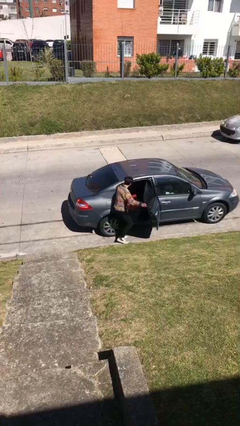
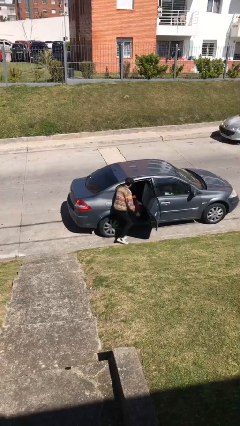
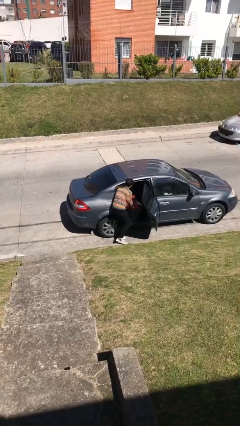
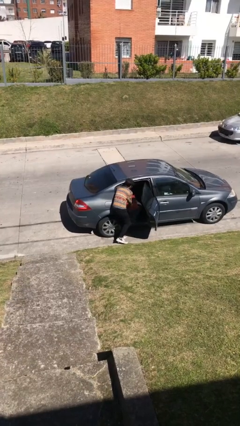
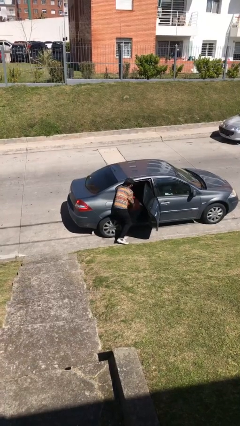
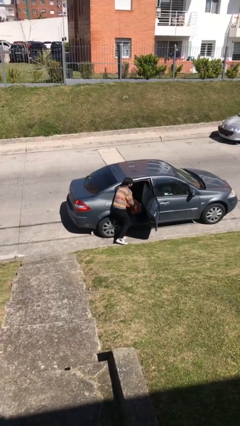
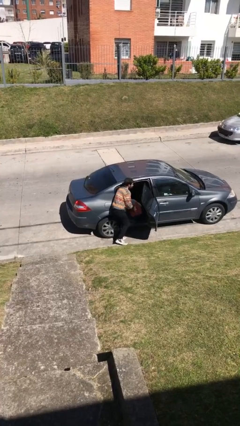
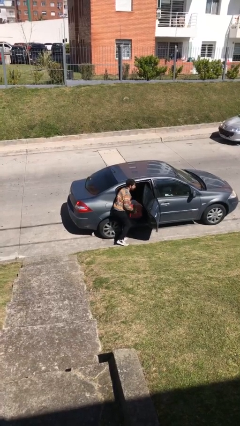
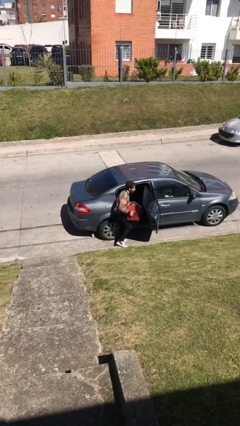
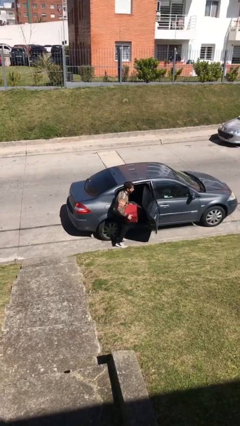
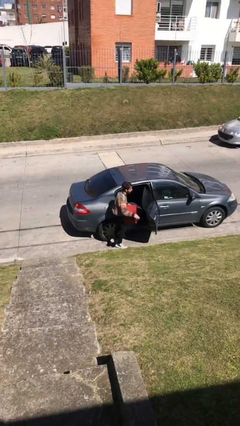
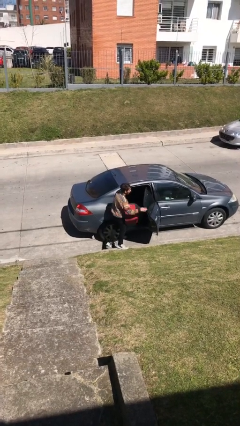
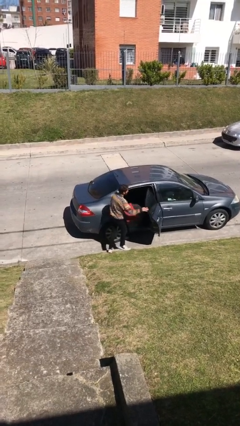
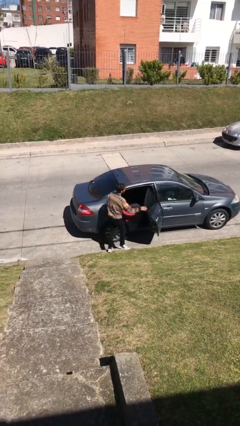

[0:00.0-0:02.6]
person unloads car

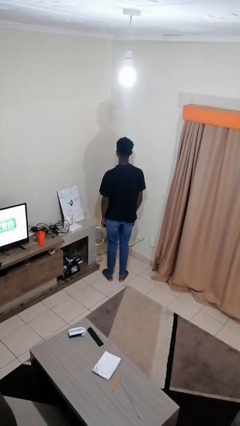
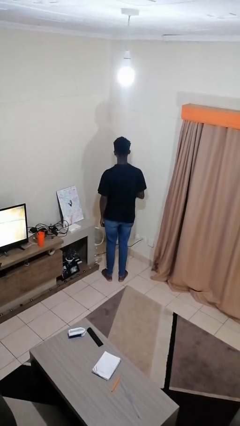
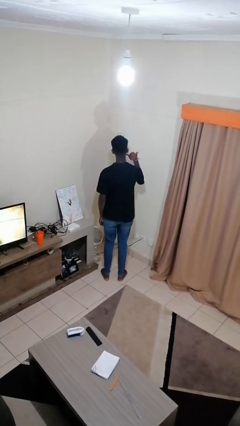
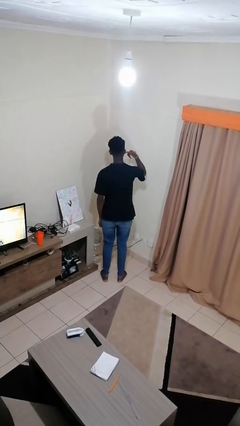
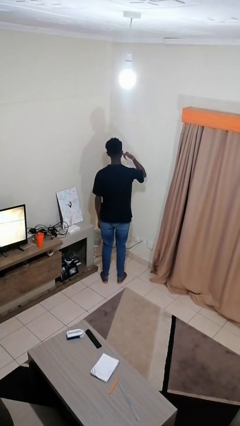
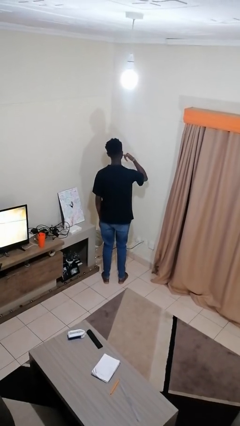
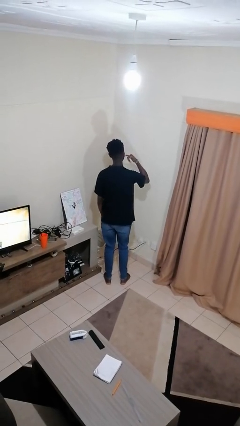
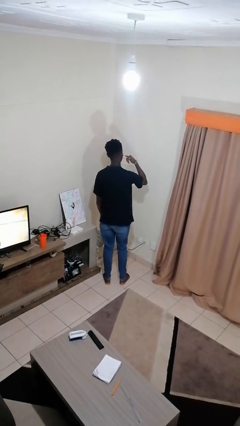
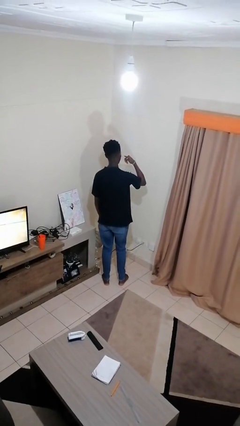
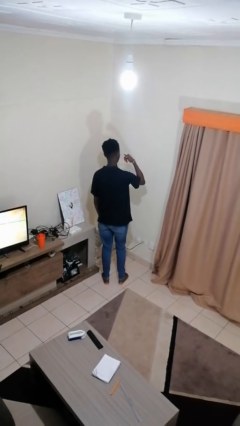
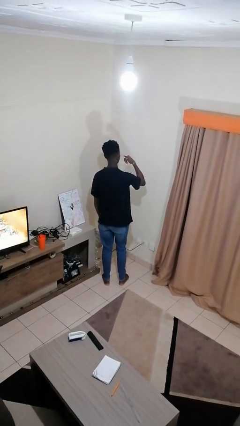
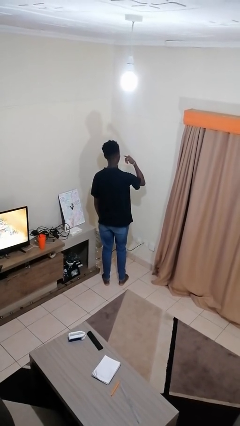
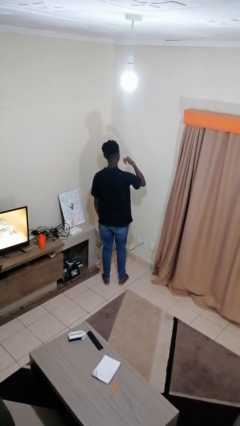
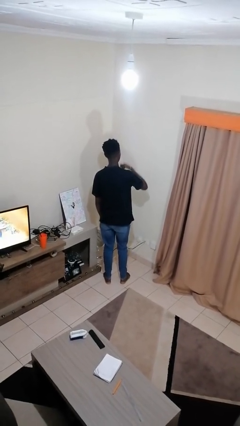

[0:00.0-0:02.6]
person gestures call me

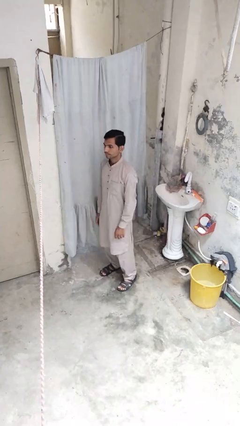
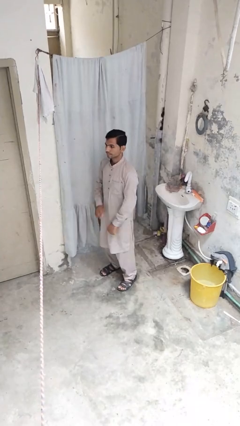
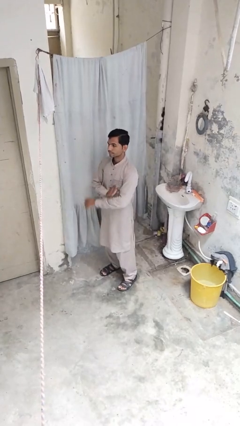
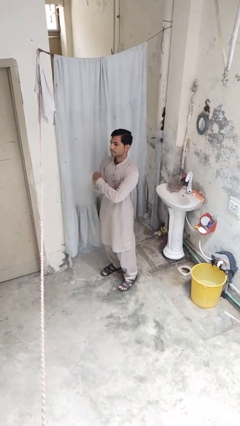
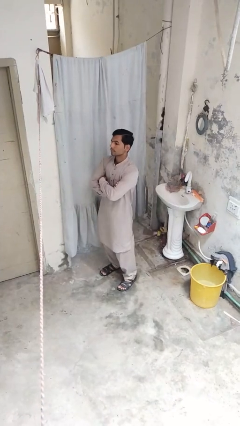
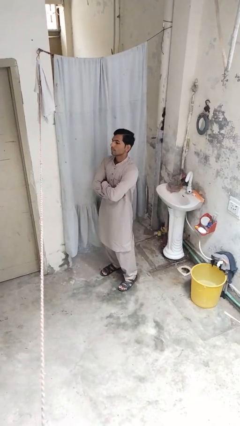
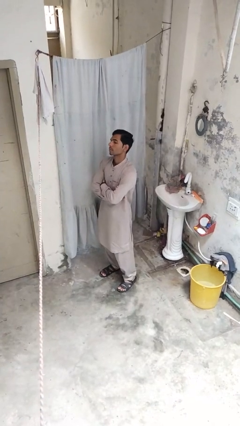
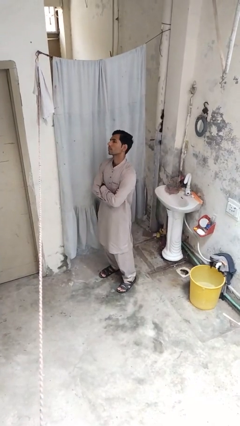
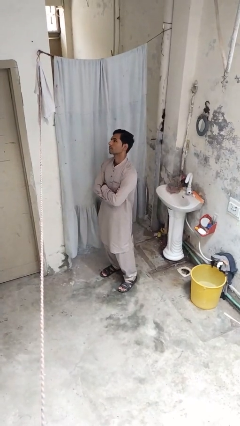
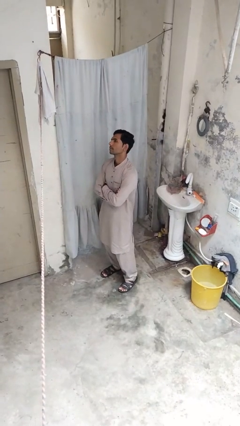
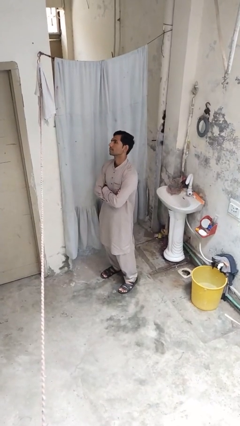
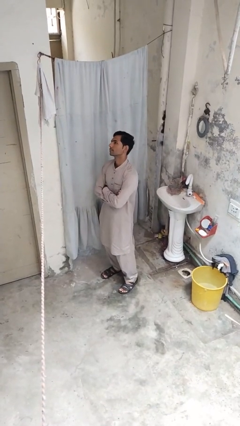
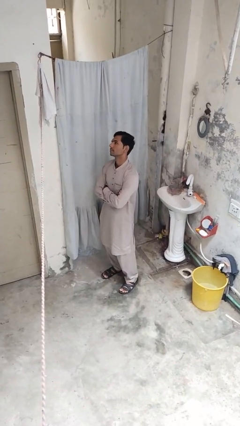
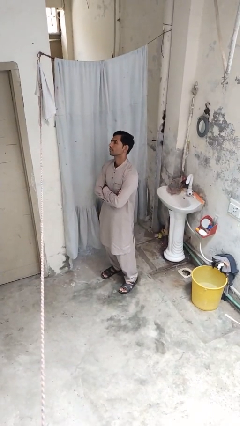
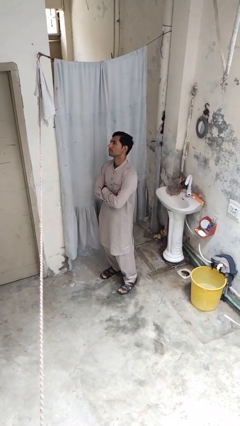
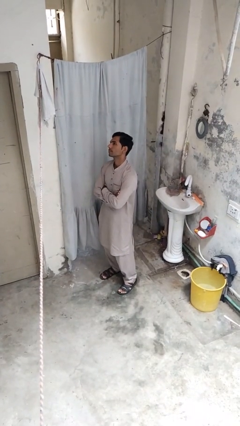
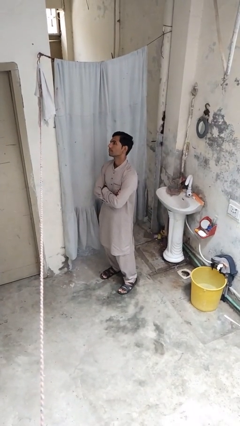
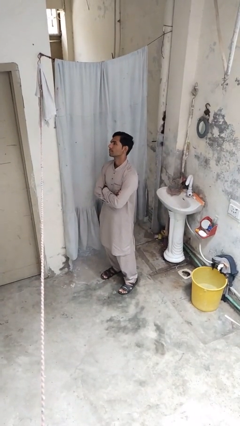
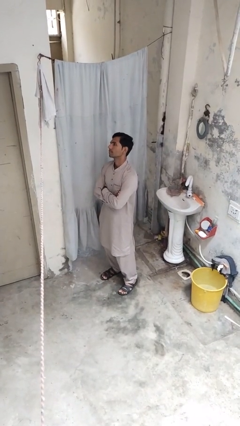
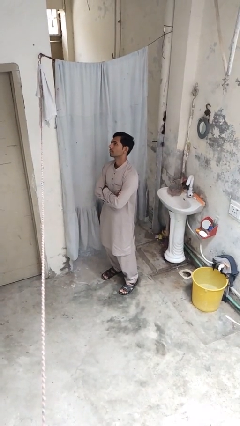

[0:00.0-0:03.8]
person crosses arms

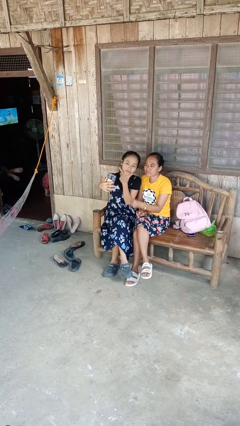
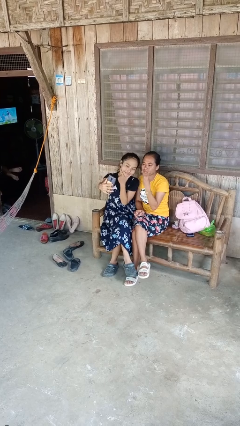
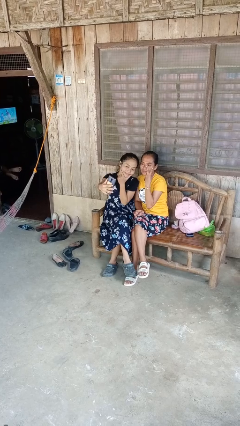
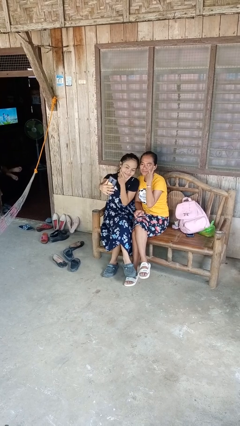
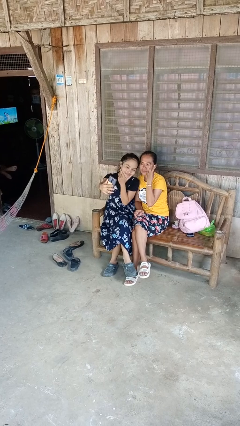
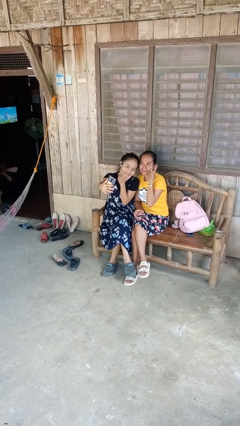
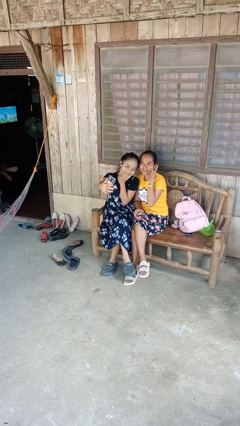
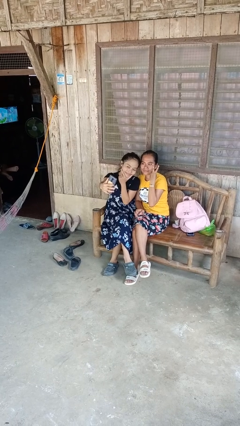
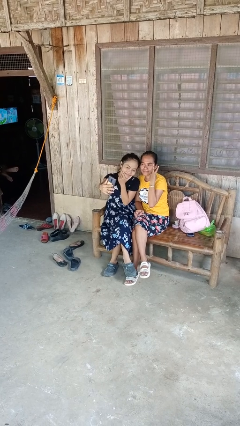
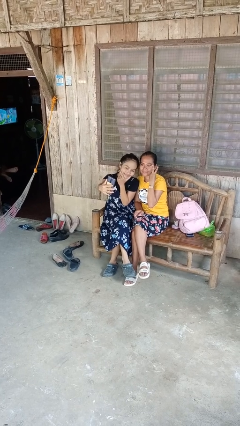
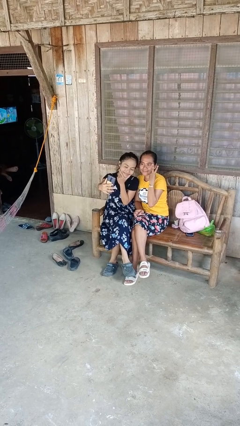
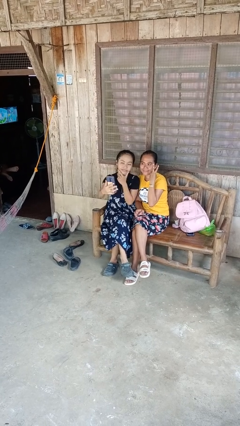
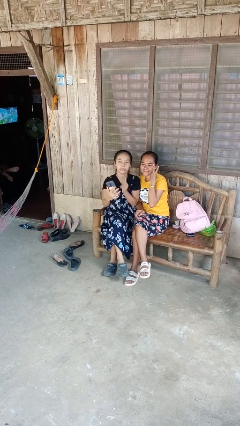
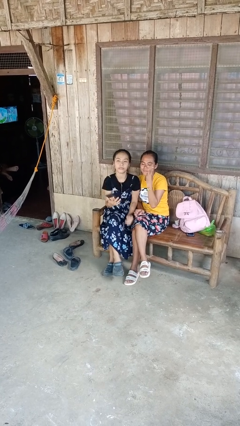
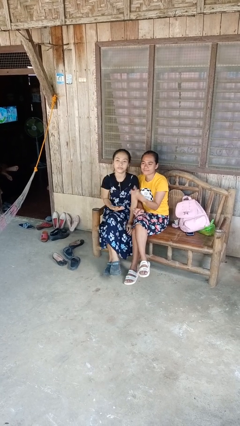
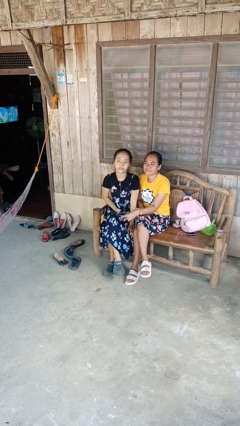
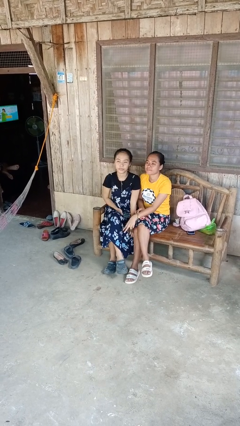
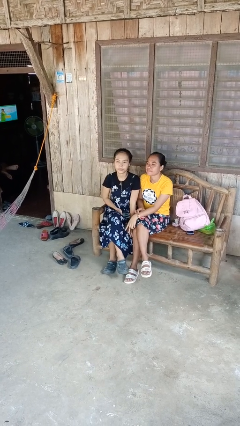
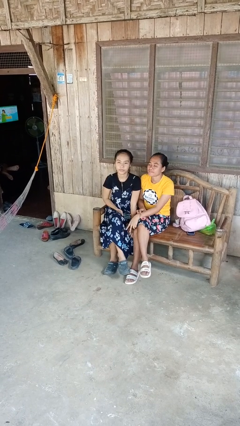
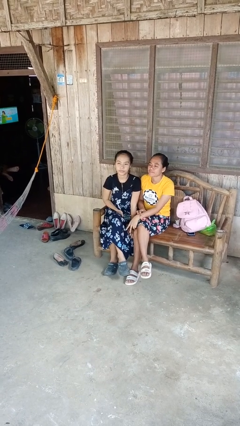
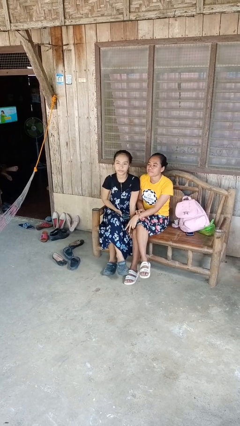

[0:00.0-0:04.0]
person takes selfie with person

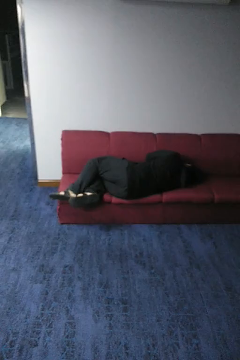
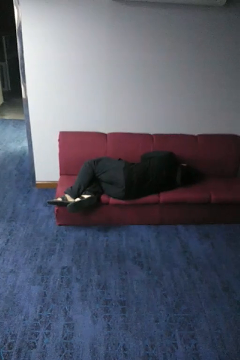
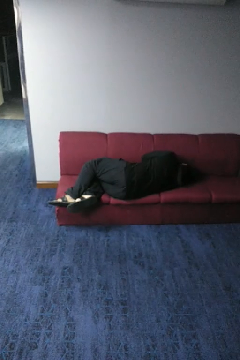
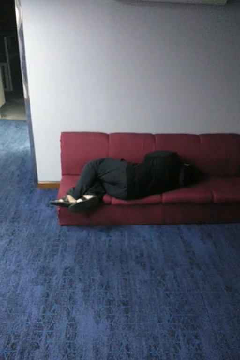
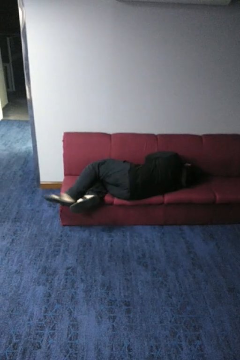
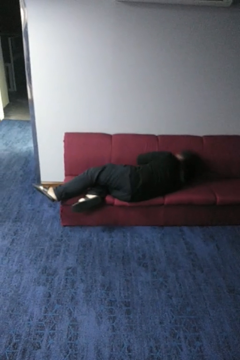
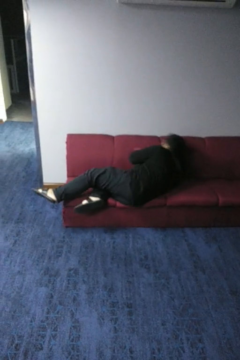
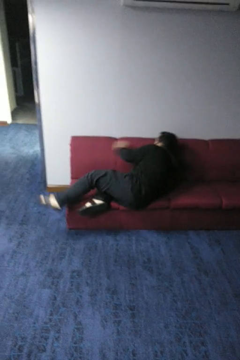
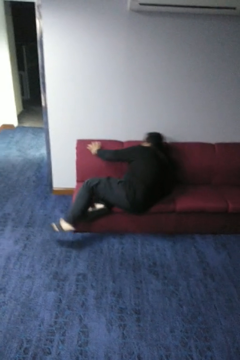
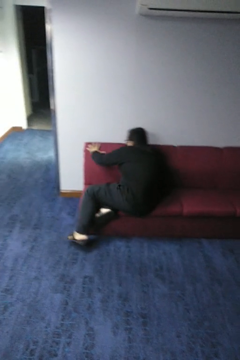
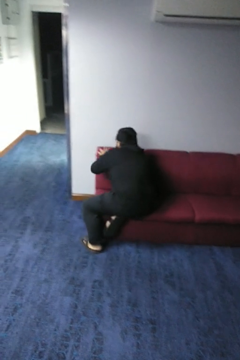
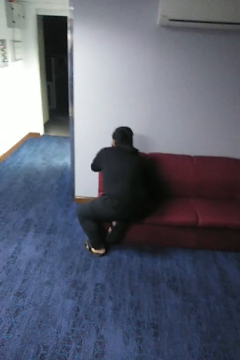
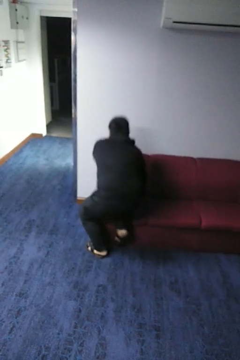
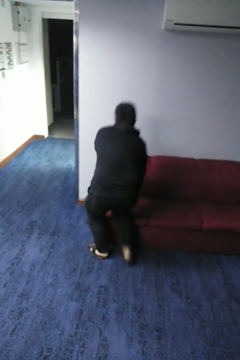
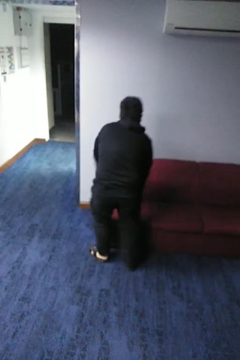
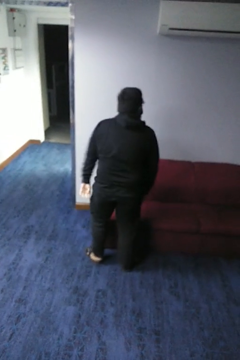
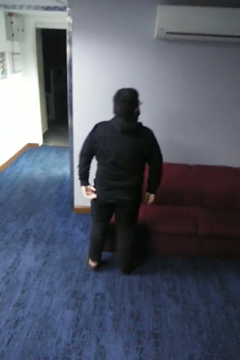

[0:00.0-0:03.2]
person stands up

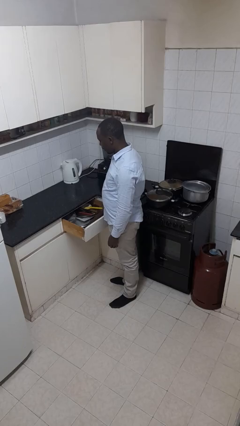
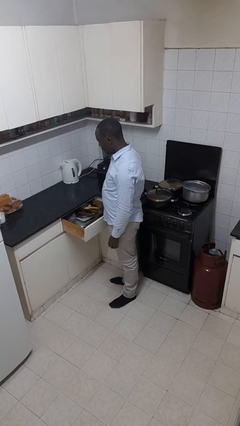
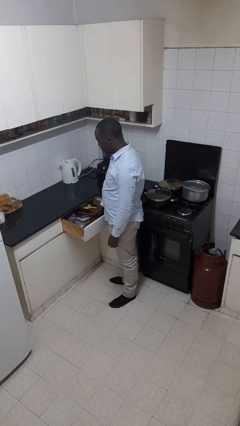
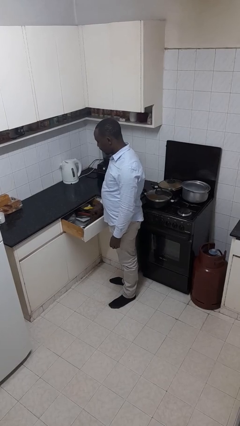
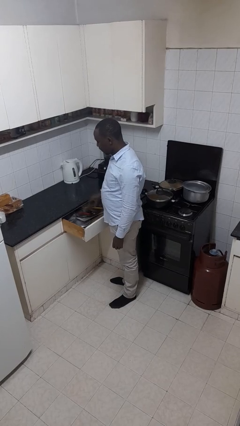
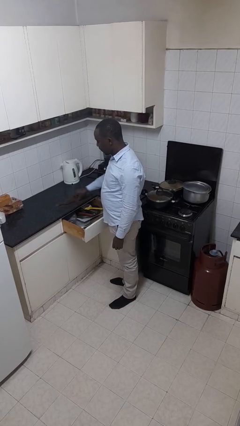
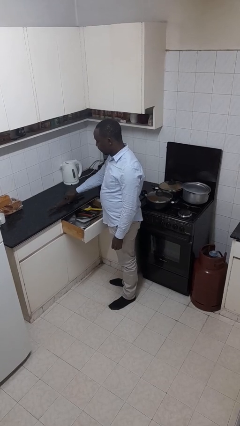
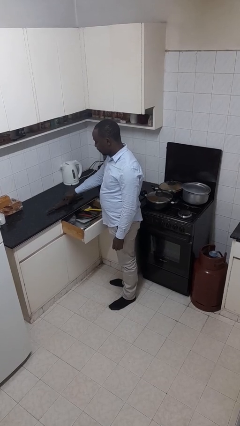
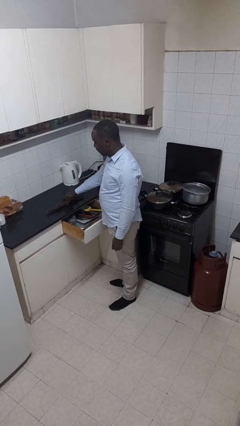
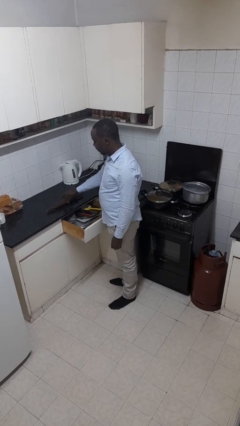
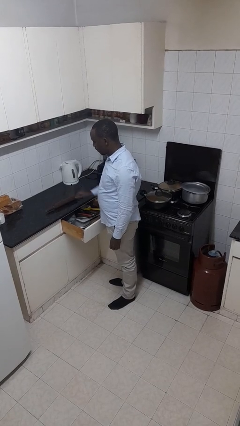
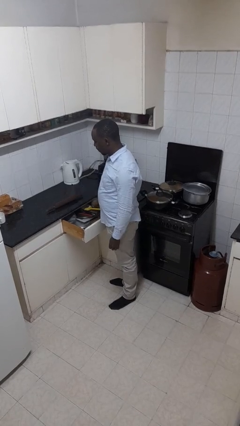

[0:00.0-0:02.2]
person takes object from kitchen drawer
